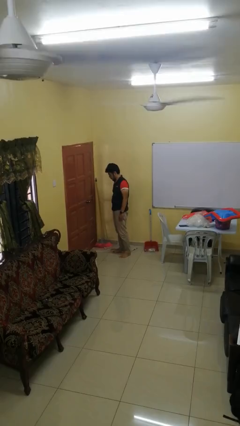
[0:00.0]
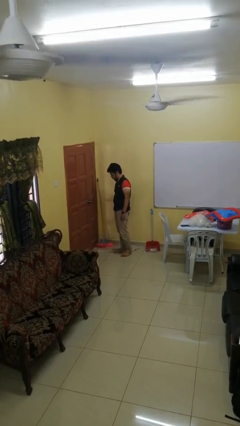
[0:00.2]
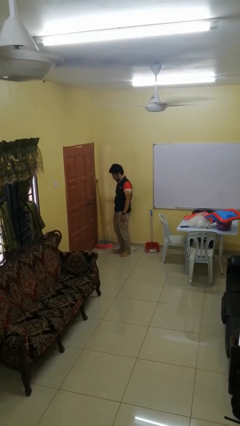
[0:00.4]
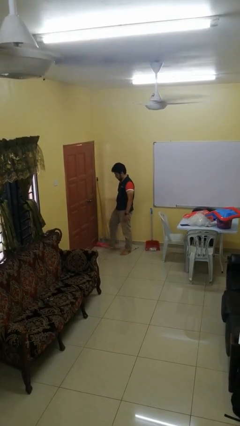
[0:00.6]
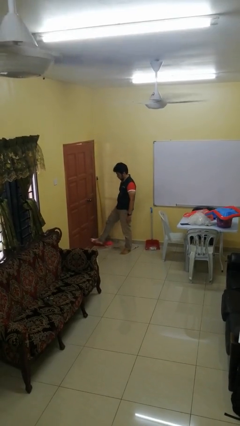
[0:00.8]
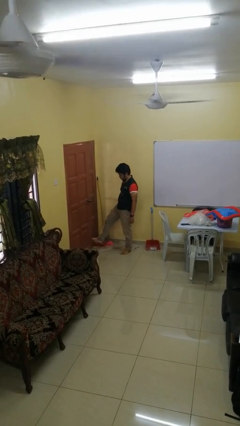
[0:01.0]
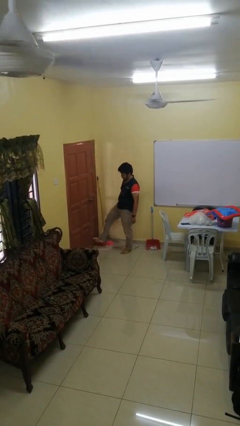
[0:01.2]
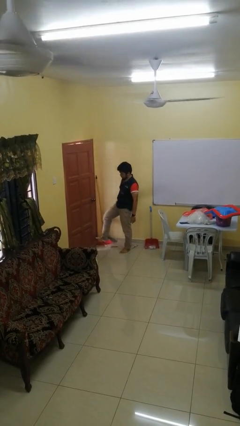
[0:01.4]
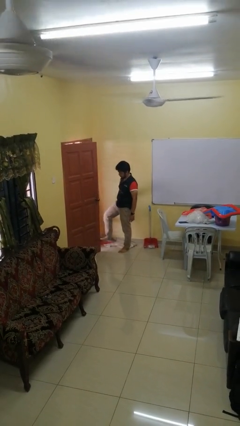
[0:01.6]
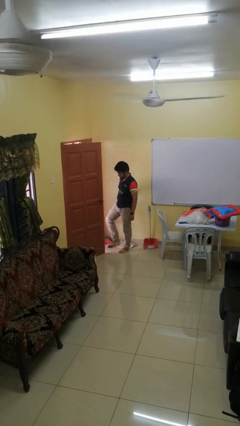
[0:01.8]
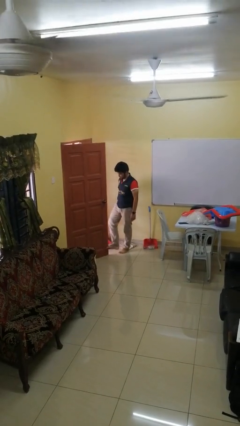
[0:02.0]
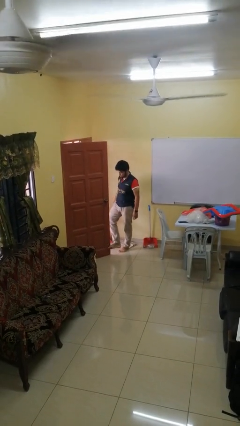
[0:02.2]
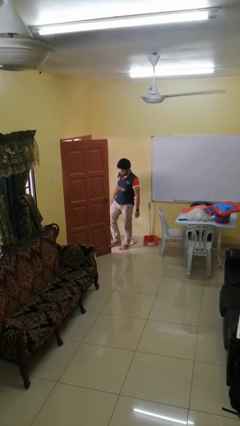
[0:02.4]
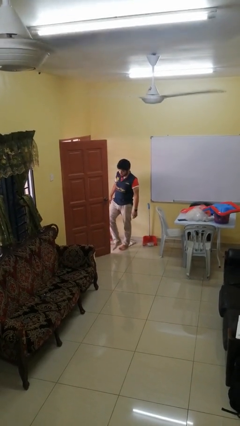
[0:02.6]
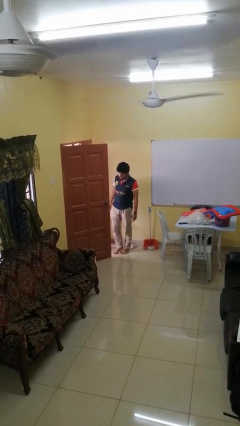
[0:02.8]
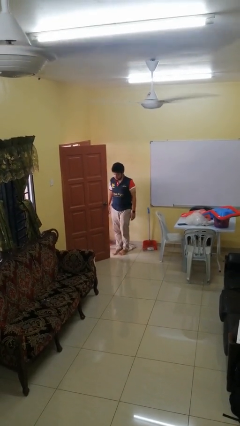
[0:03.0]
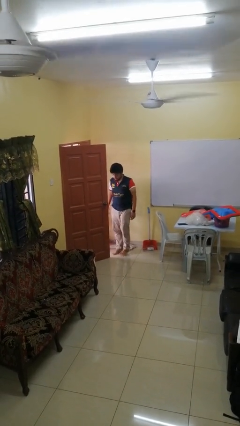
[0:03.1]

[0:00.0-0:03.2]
person opens facility door

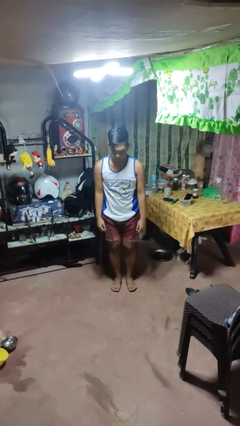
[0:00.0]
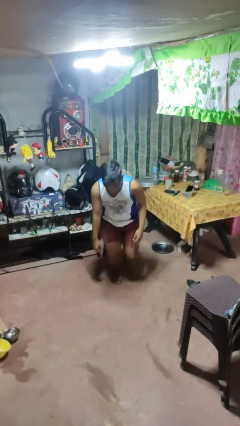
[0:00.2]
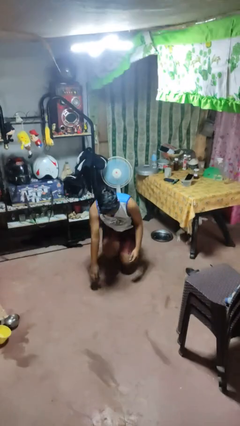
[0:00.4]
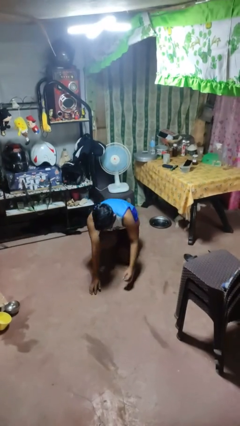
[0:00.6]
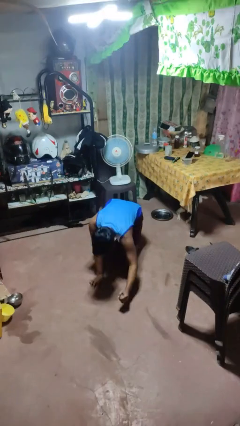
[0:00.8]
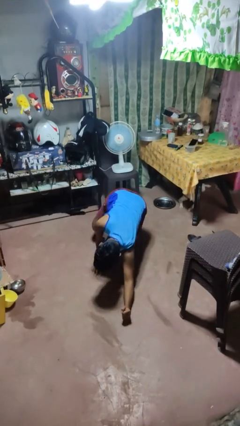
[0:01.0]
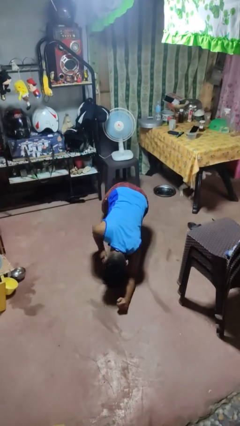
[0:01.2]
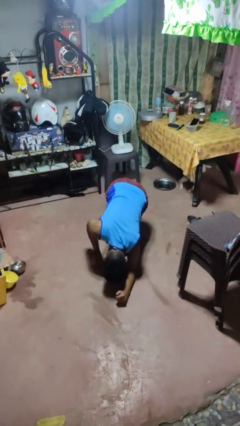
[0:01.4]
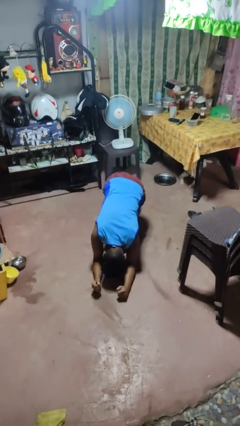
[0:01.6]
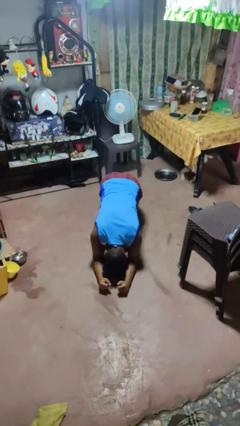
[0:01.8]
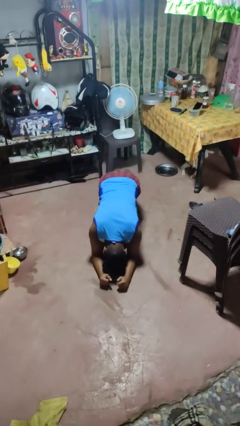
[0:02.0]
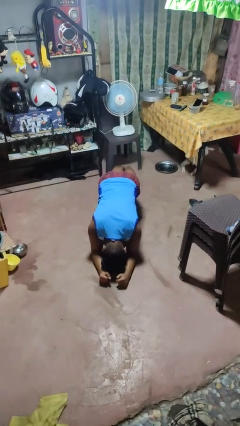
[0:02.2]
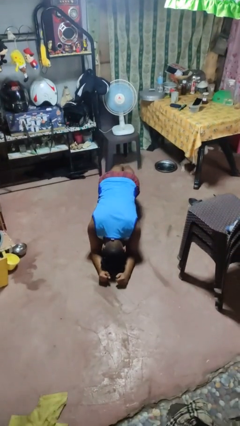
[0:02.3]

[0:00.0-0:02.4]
person exercises with plank

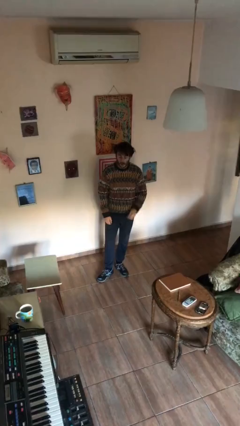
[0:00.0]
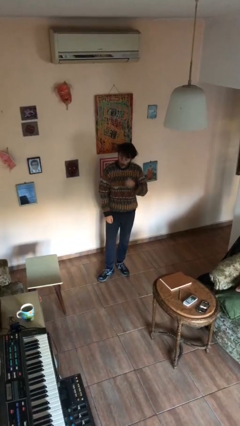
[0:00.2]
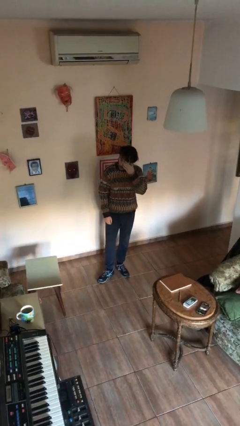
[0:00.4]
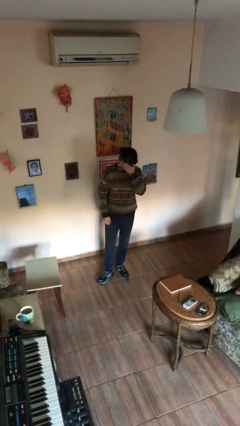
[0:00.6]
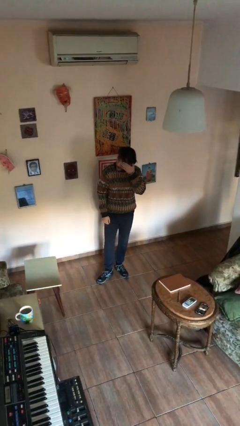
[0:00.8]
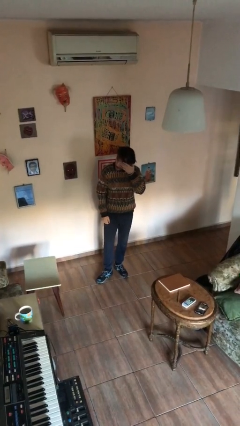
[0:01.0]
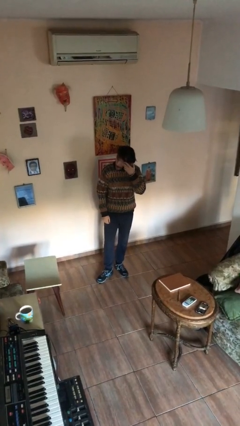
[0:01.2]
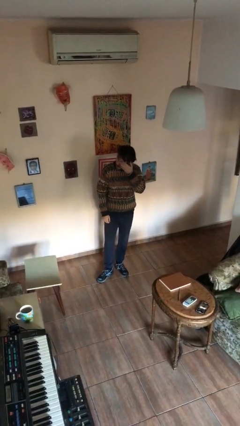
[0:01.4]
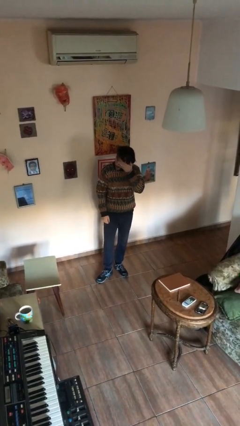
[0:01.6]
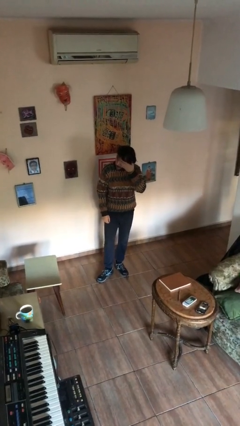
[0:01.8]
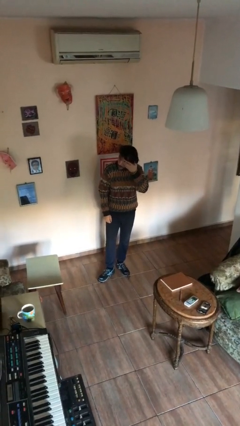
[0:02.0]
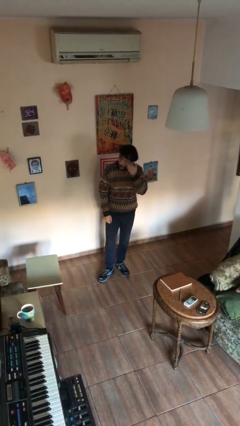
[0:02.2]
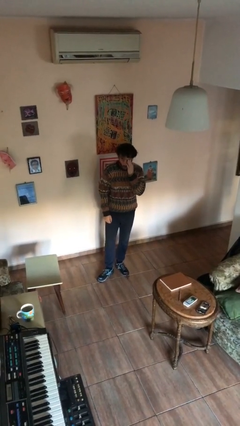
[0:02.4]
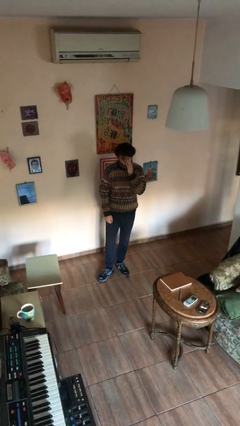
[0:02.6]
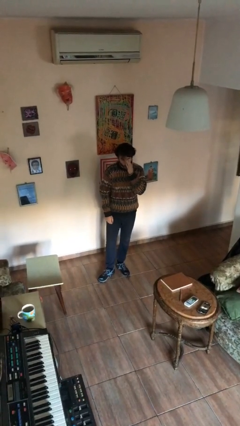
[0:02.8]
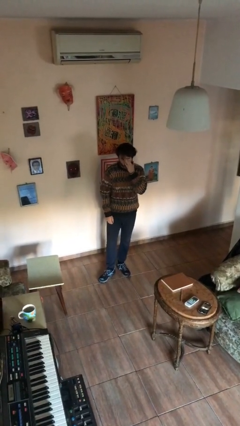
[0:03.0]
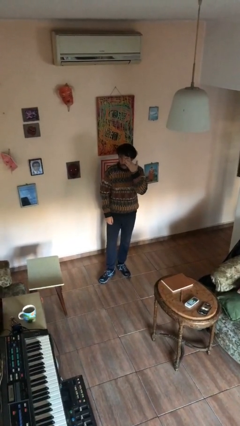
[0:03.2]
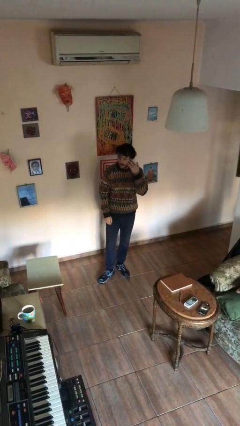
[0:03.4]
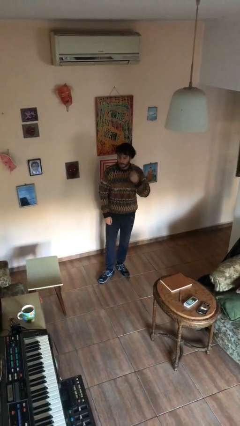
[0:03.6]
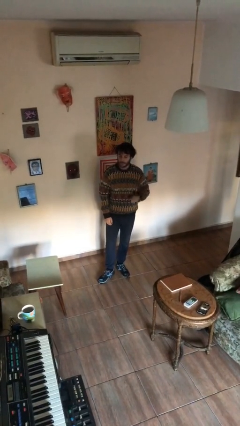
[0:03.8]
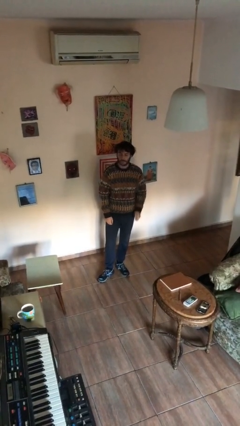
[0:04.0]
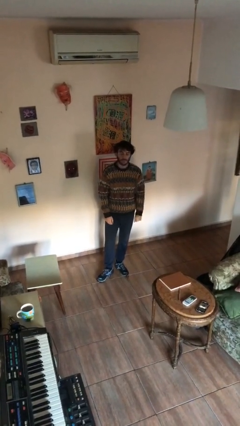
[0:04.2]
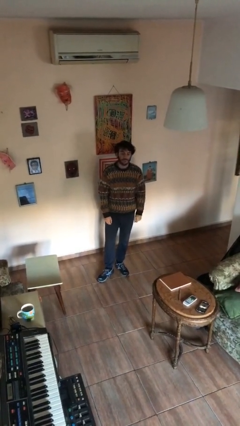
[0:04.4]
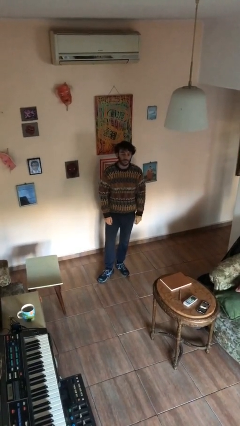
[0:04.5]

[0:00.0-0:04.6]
person scratches face

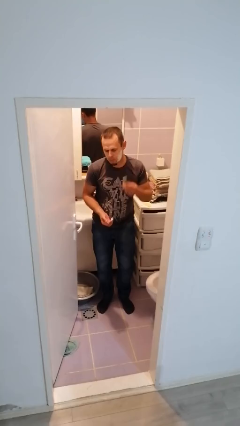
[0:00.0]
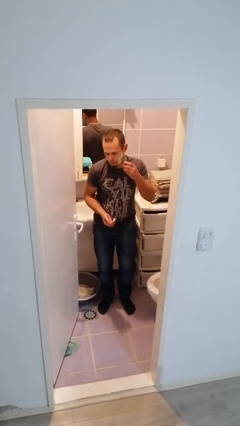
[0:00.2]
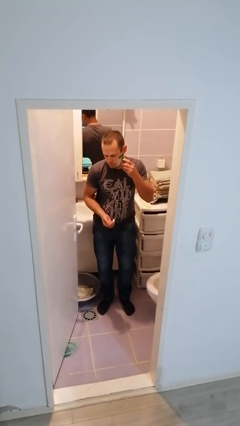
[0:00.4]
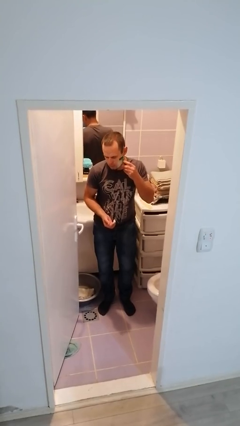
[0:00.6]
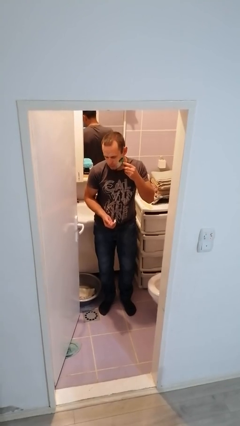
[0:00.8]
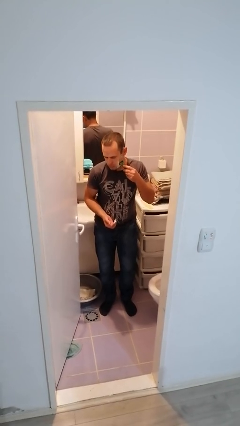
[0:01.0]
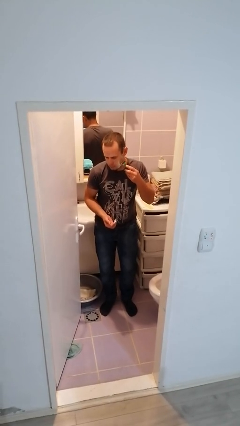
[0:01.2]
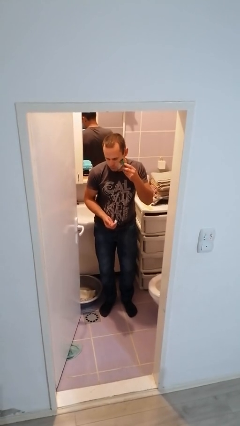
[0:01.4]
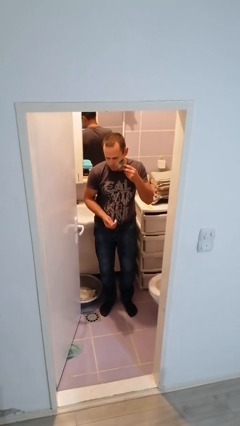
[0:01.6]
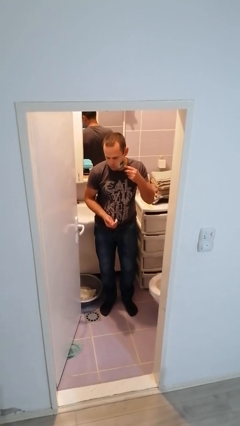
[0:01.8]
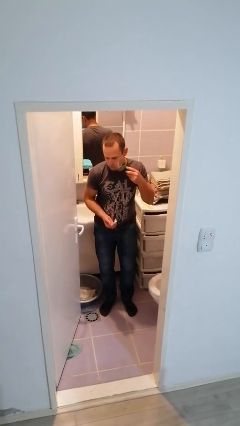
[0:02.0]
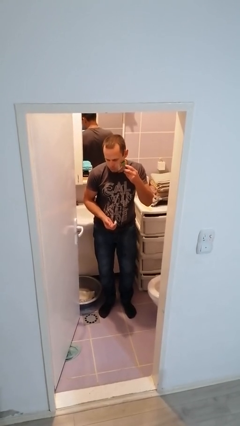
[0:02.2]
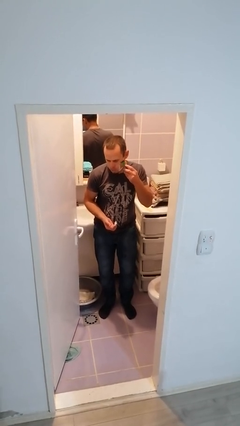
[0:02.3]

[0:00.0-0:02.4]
person shaves face

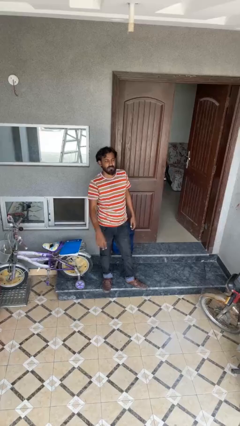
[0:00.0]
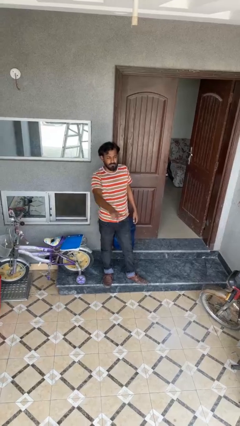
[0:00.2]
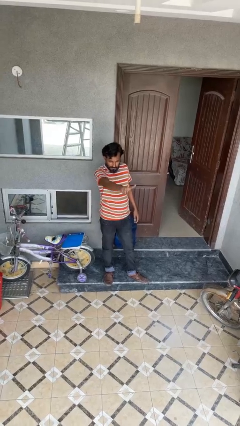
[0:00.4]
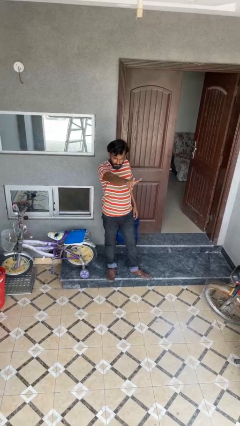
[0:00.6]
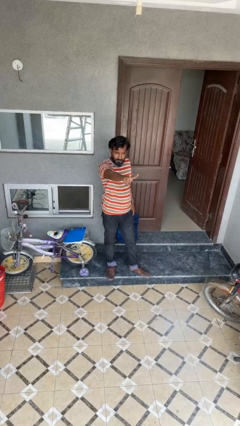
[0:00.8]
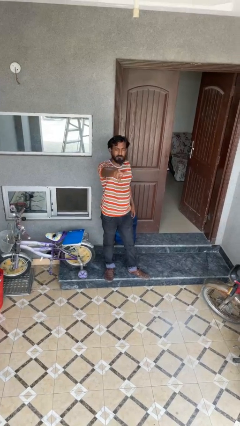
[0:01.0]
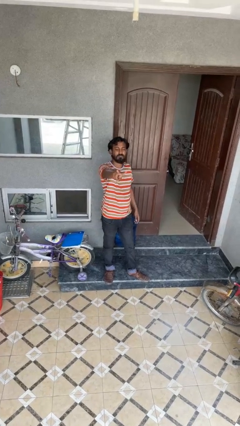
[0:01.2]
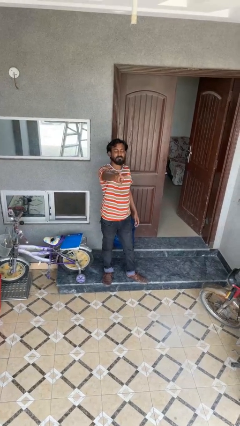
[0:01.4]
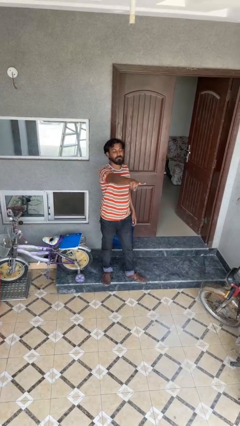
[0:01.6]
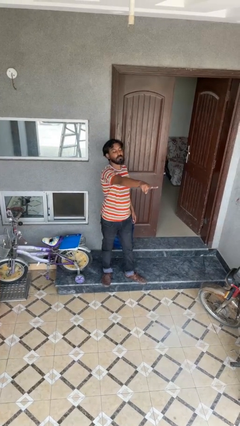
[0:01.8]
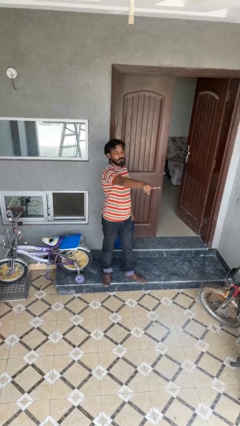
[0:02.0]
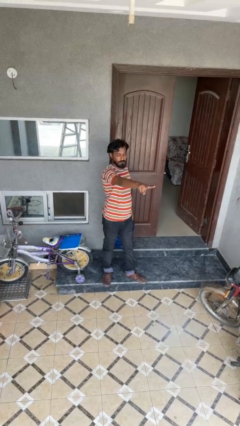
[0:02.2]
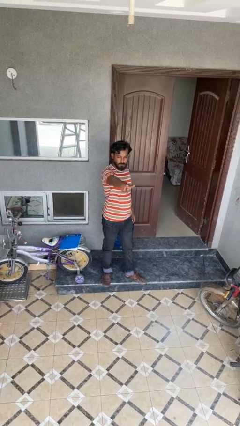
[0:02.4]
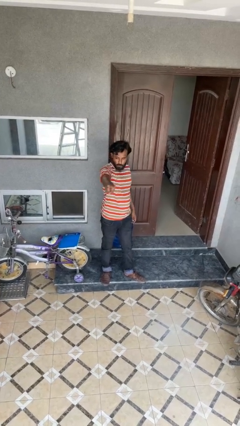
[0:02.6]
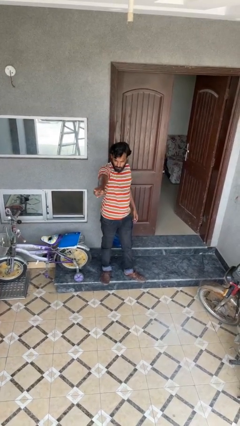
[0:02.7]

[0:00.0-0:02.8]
person gestures peace

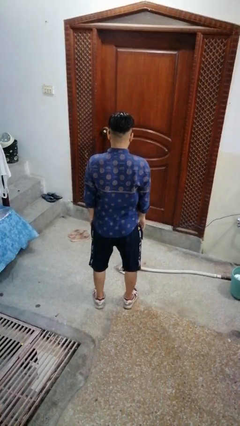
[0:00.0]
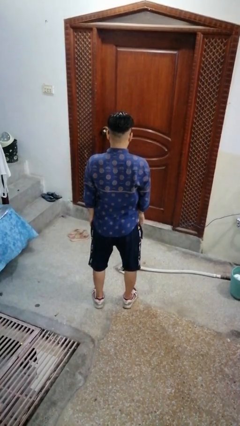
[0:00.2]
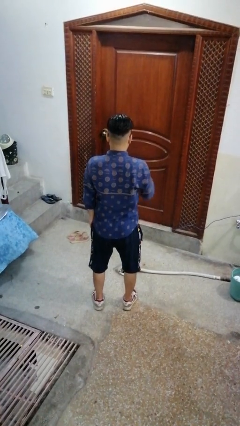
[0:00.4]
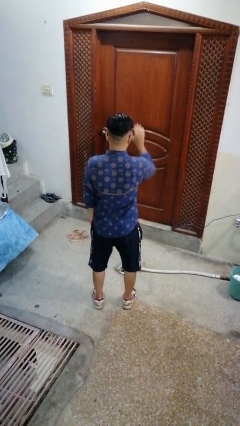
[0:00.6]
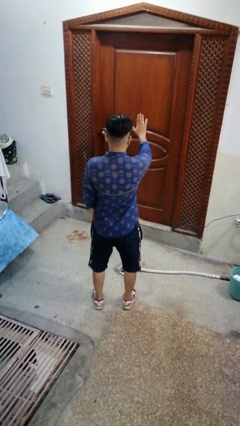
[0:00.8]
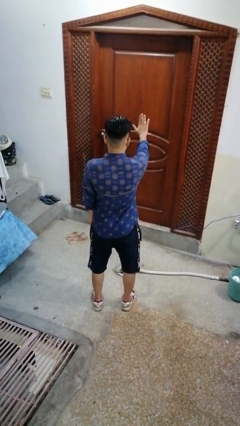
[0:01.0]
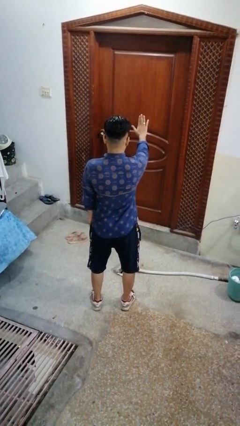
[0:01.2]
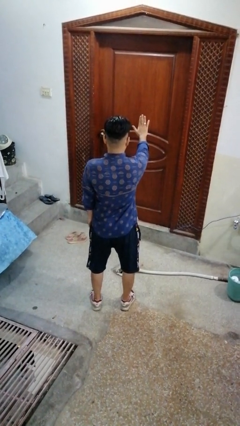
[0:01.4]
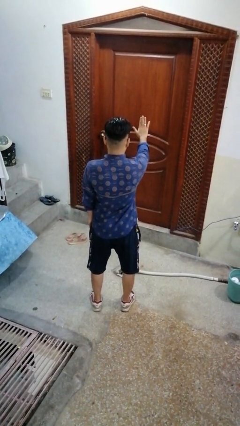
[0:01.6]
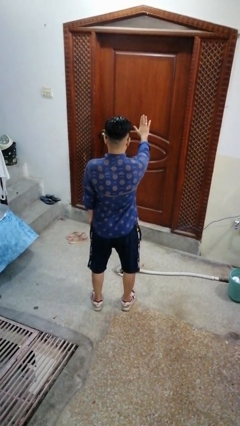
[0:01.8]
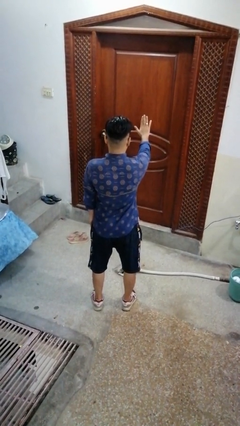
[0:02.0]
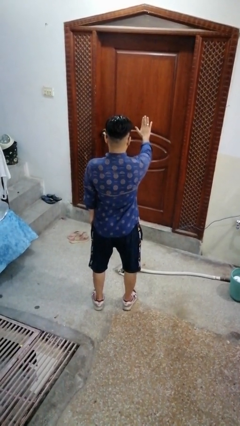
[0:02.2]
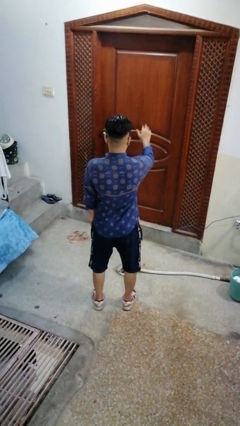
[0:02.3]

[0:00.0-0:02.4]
person gestures stop
